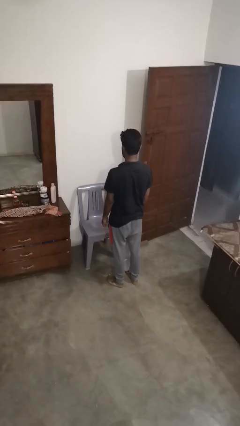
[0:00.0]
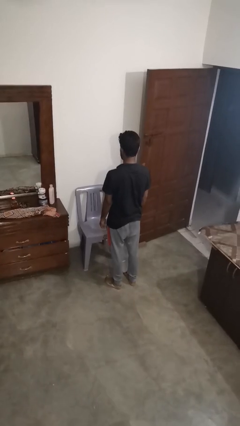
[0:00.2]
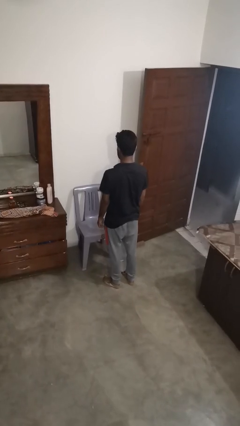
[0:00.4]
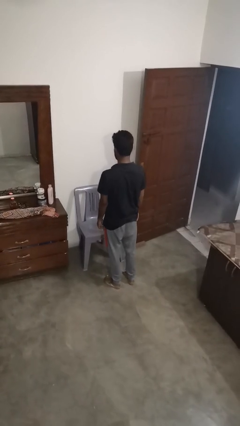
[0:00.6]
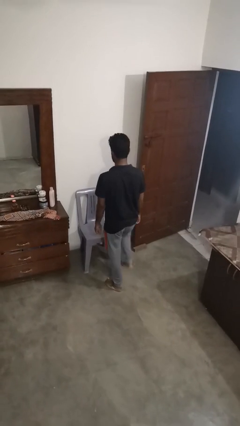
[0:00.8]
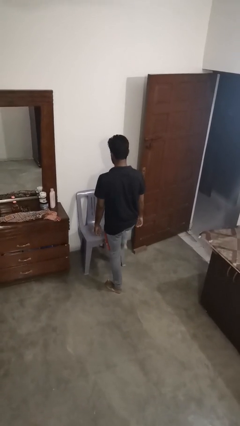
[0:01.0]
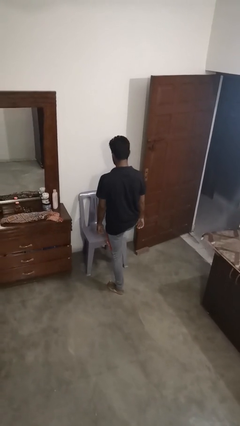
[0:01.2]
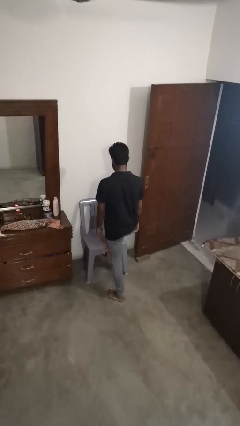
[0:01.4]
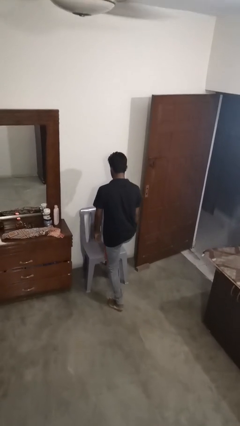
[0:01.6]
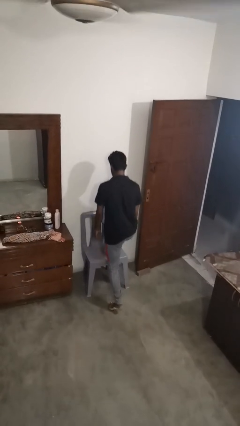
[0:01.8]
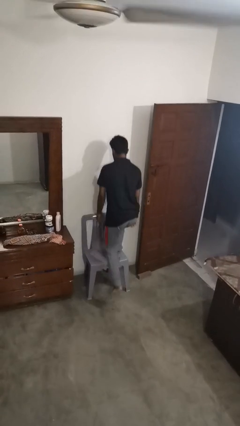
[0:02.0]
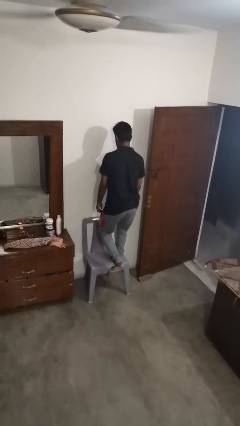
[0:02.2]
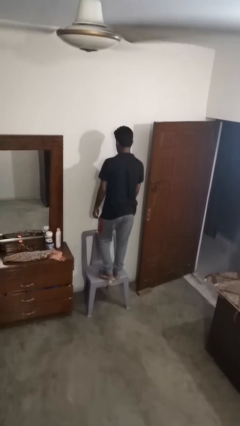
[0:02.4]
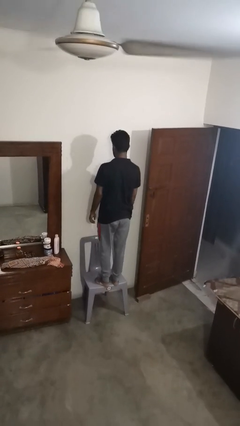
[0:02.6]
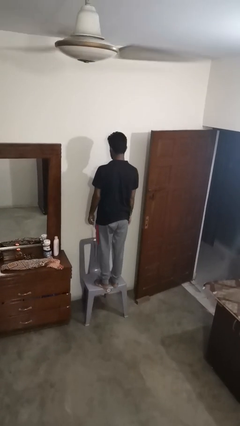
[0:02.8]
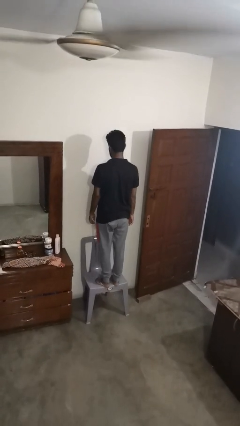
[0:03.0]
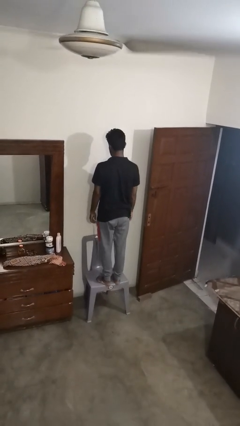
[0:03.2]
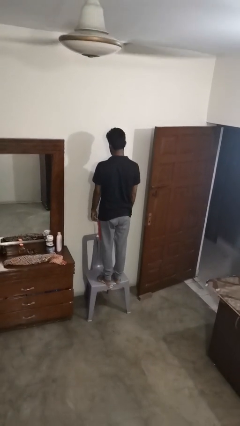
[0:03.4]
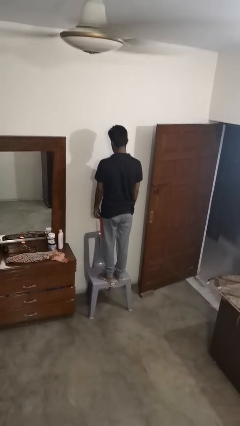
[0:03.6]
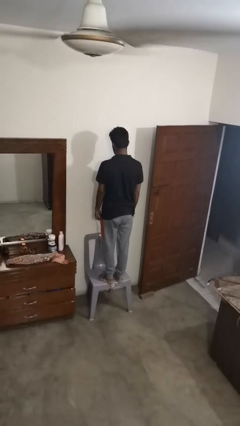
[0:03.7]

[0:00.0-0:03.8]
person climbs on chair

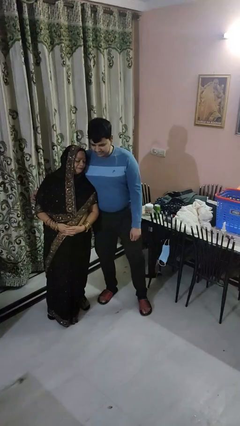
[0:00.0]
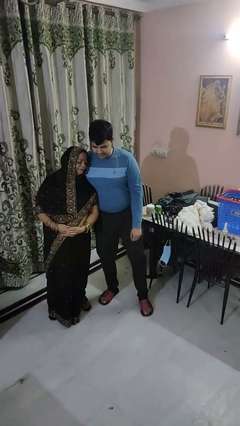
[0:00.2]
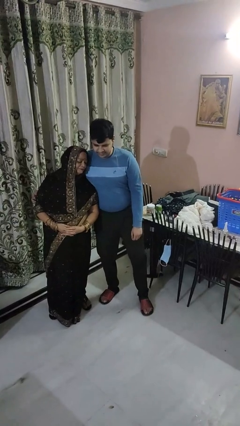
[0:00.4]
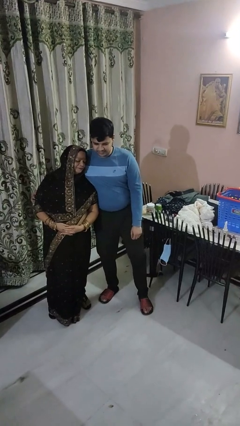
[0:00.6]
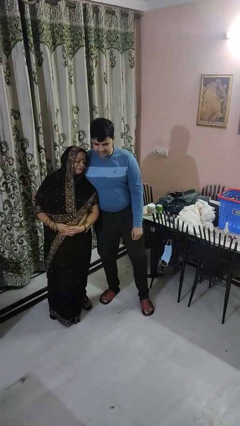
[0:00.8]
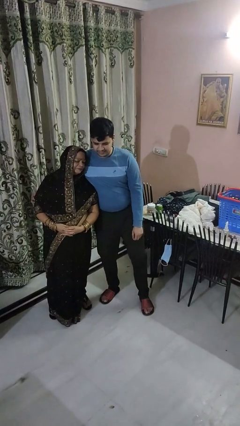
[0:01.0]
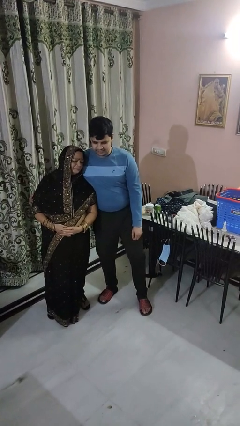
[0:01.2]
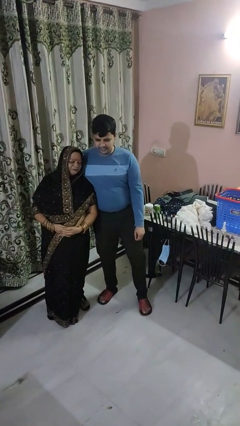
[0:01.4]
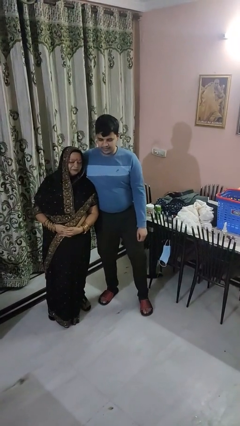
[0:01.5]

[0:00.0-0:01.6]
person hugs person from side

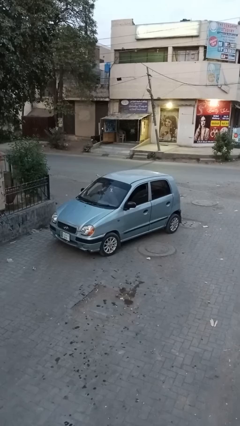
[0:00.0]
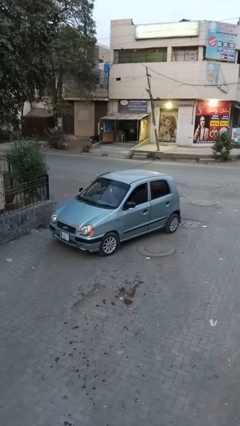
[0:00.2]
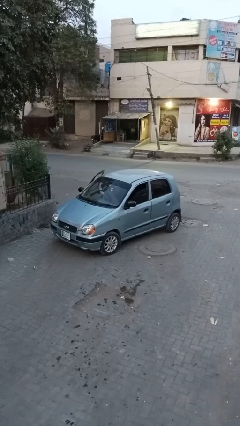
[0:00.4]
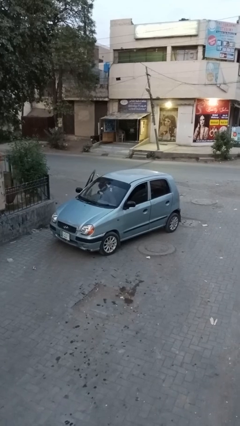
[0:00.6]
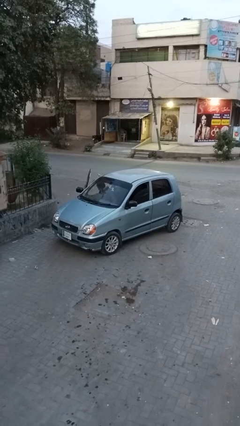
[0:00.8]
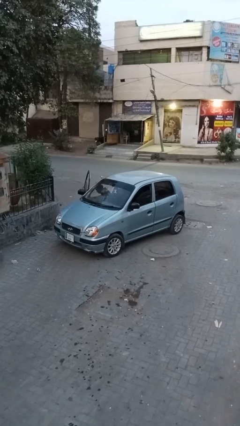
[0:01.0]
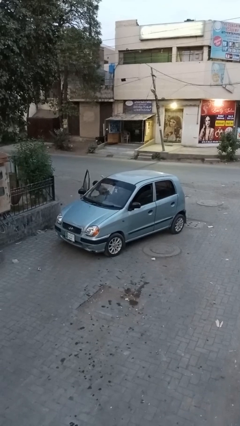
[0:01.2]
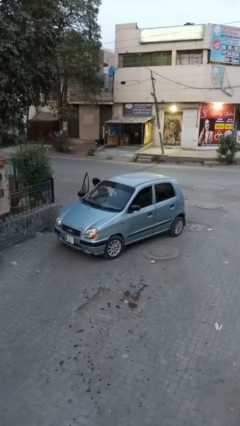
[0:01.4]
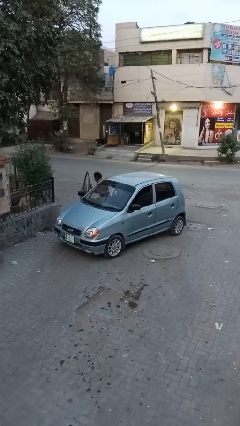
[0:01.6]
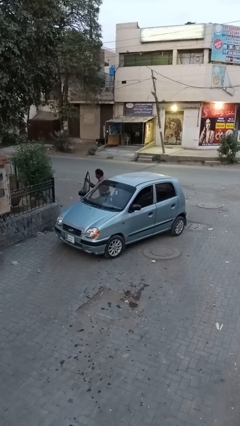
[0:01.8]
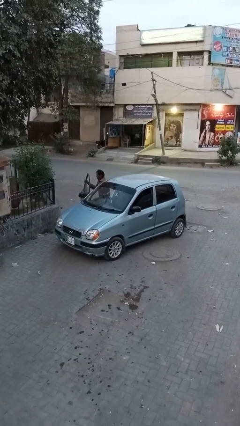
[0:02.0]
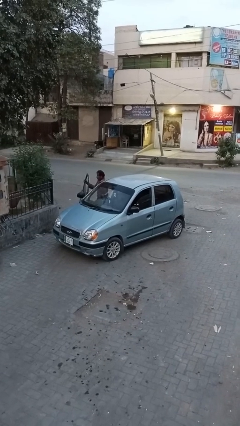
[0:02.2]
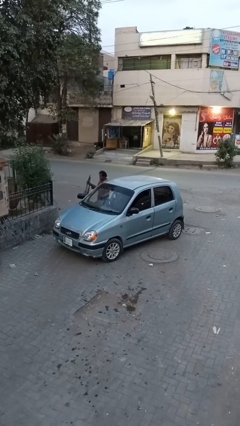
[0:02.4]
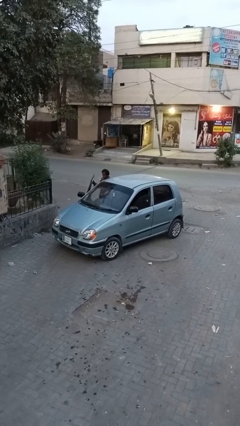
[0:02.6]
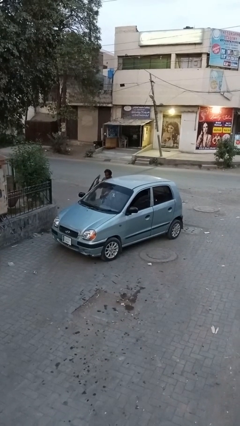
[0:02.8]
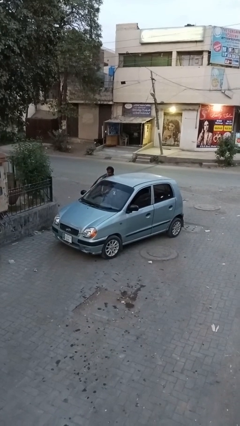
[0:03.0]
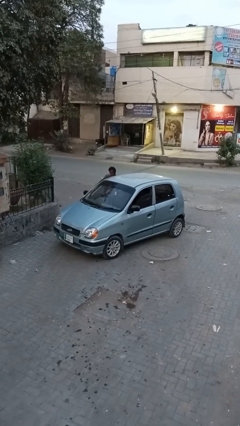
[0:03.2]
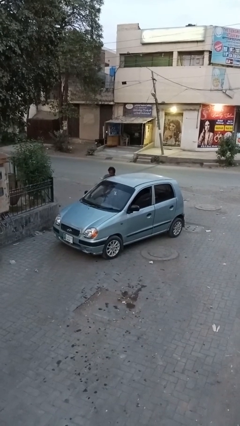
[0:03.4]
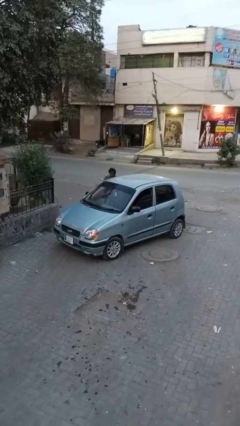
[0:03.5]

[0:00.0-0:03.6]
car drops off person

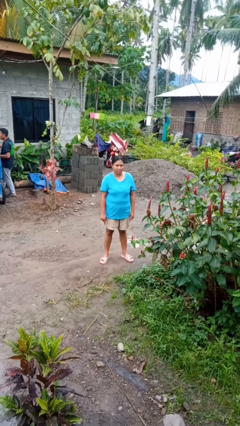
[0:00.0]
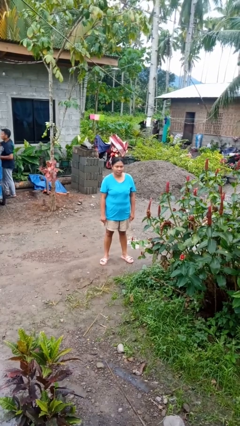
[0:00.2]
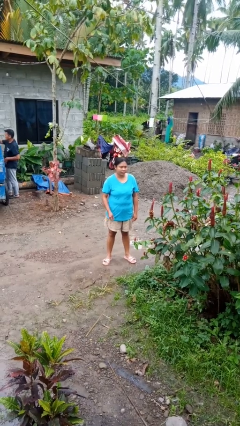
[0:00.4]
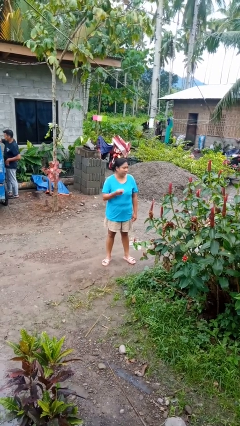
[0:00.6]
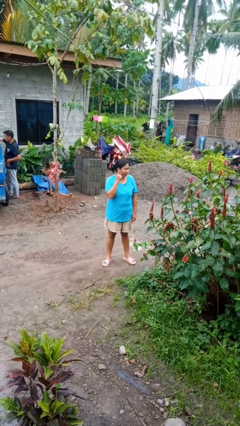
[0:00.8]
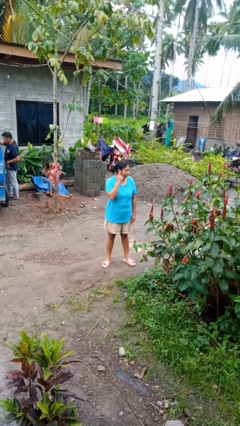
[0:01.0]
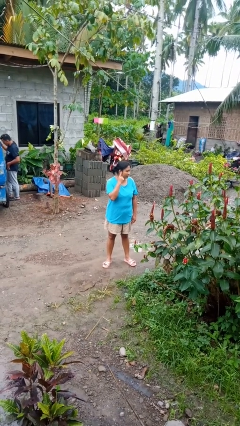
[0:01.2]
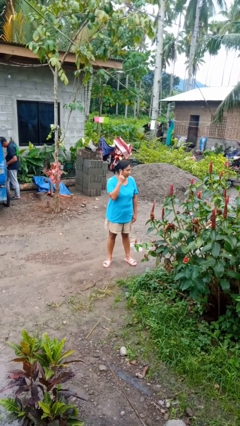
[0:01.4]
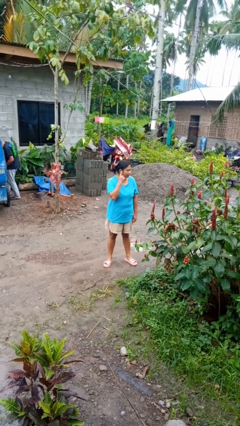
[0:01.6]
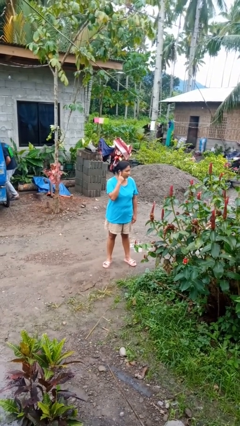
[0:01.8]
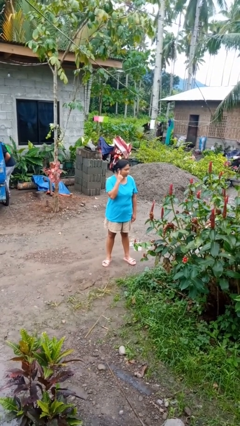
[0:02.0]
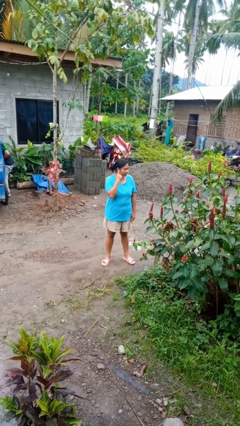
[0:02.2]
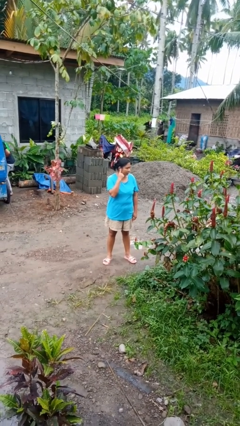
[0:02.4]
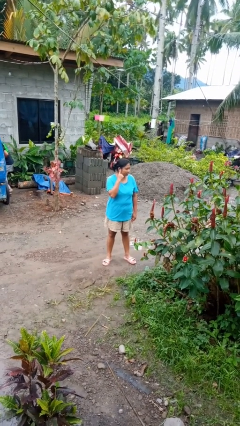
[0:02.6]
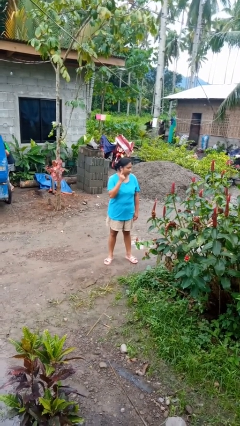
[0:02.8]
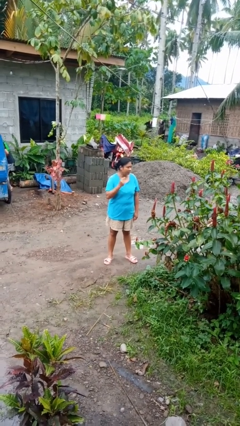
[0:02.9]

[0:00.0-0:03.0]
person gestures listen closely

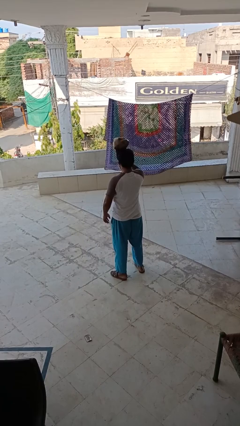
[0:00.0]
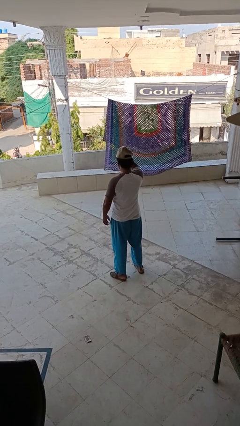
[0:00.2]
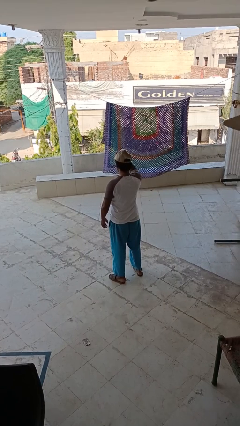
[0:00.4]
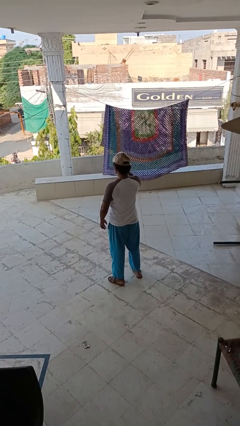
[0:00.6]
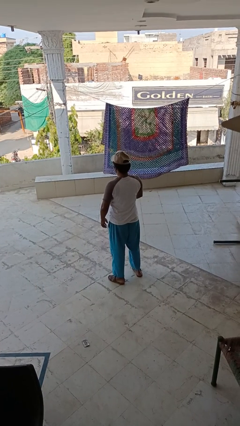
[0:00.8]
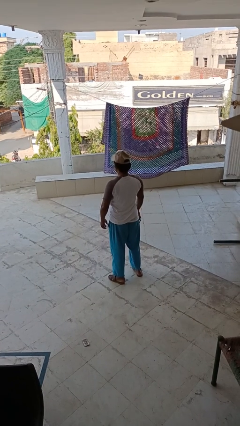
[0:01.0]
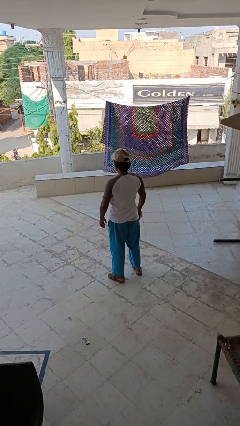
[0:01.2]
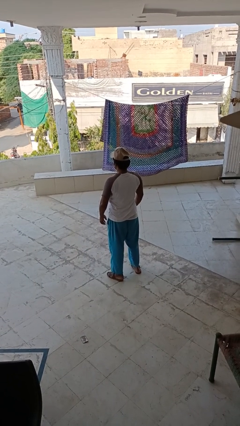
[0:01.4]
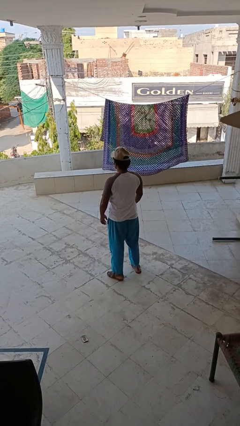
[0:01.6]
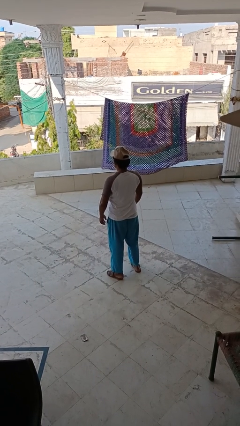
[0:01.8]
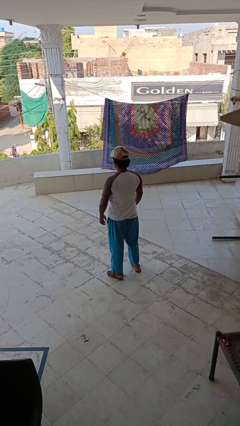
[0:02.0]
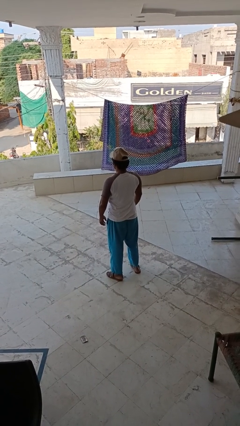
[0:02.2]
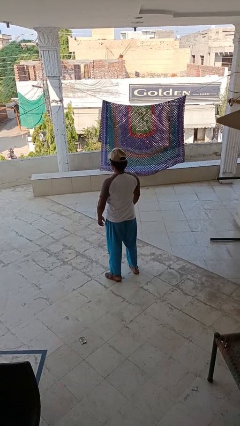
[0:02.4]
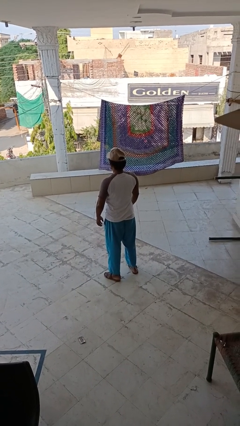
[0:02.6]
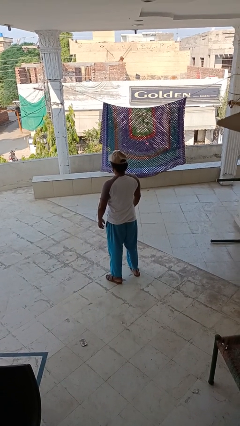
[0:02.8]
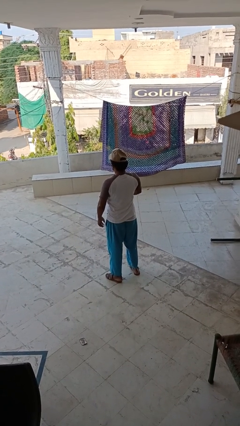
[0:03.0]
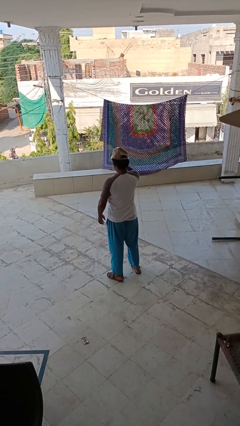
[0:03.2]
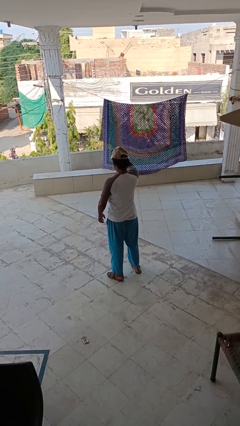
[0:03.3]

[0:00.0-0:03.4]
person puts on hat

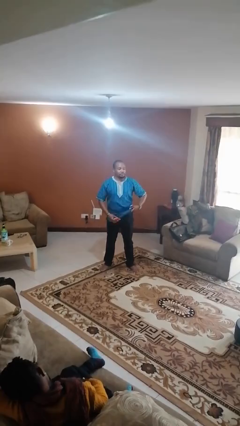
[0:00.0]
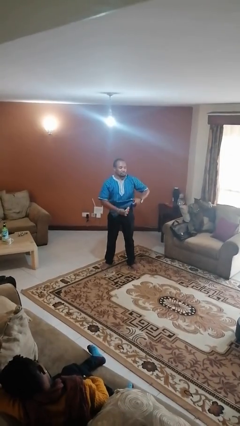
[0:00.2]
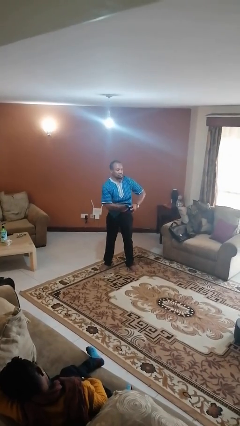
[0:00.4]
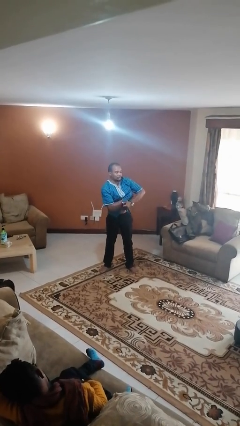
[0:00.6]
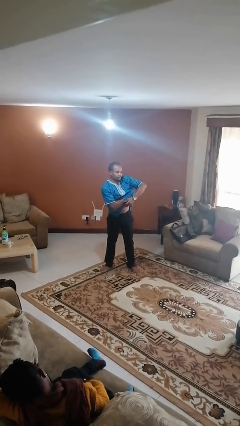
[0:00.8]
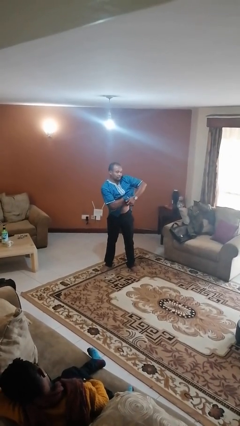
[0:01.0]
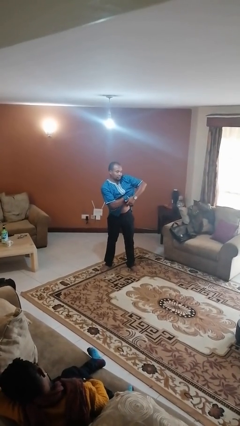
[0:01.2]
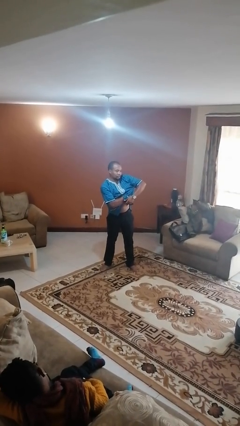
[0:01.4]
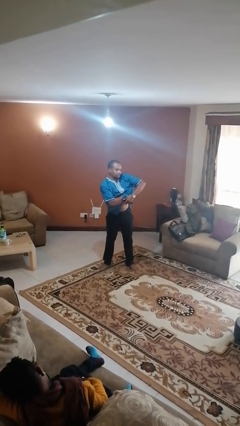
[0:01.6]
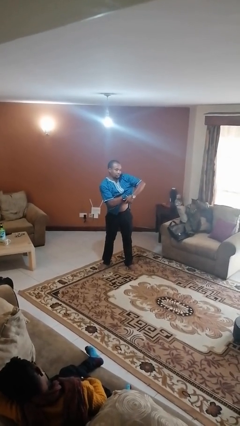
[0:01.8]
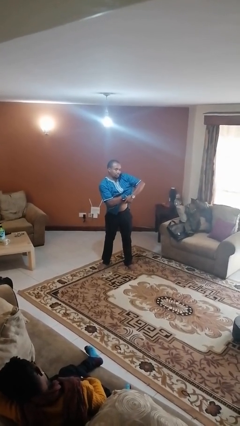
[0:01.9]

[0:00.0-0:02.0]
person applies deodorant
